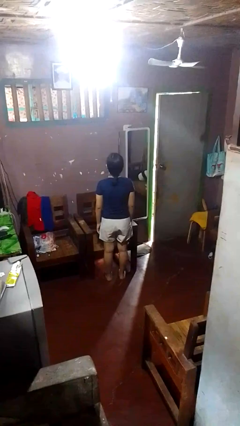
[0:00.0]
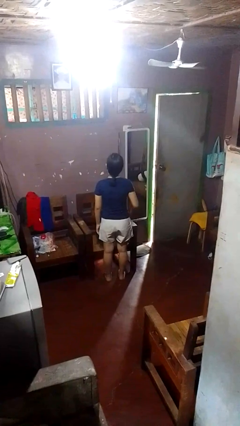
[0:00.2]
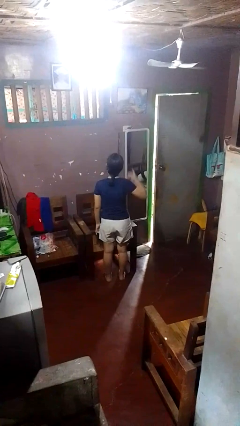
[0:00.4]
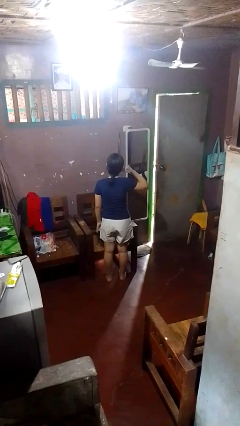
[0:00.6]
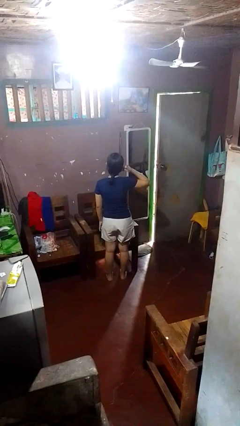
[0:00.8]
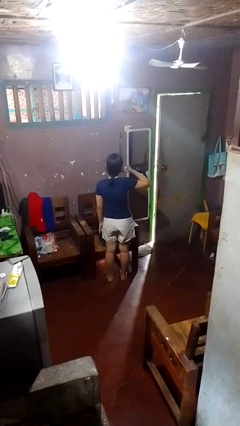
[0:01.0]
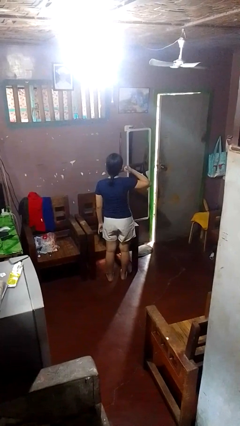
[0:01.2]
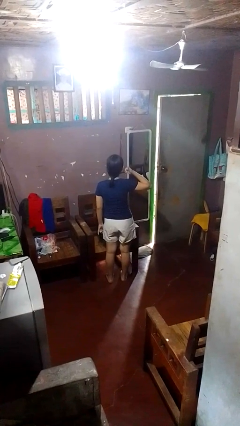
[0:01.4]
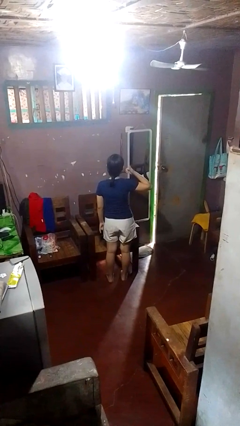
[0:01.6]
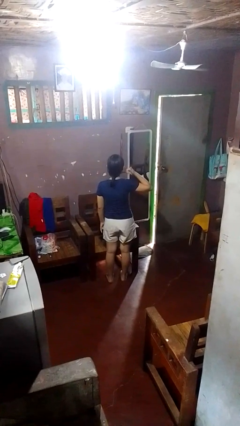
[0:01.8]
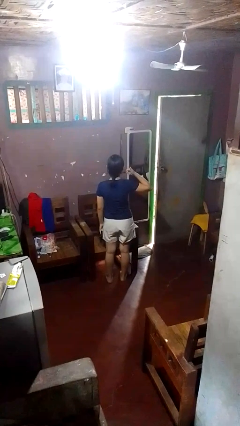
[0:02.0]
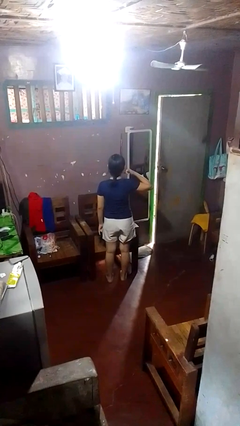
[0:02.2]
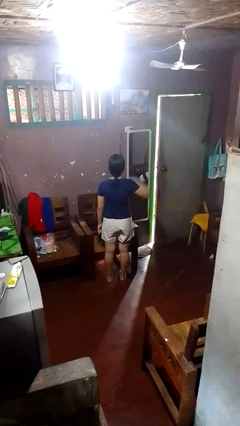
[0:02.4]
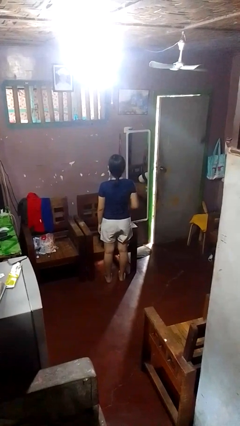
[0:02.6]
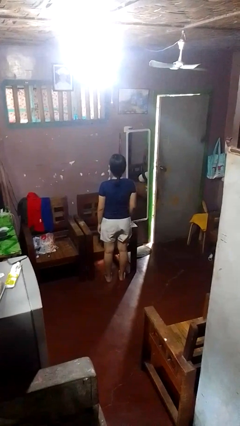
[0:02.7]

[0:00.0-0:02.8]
person gestures call me

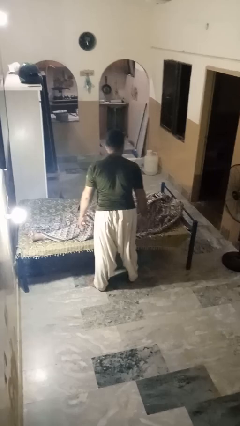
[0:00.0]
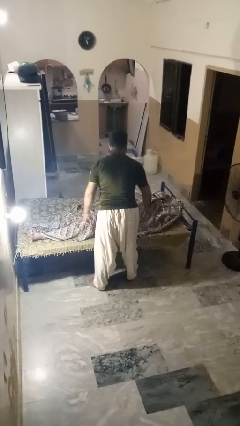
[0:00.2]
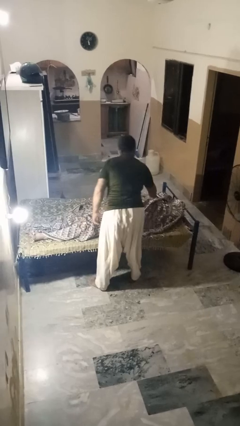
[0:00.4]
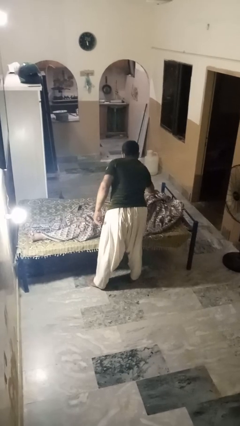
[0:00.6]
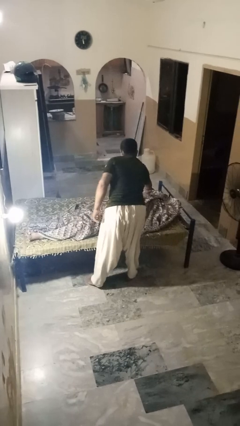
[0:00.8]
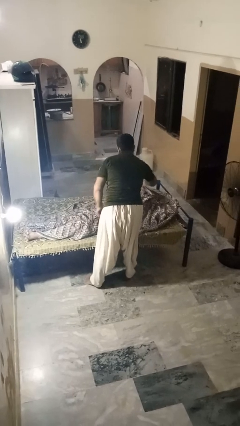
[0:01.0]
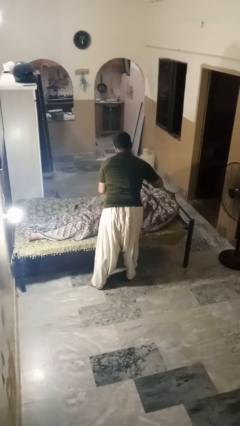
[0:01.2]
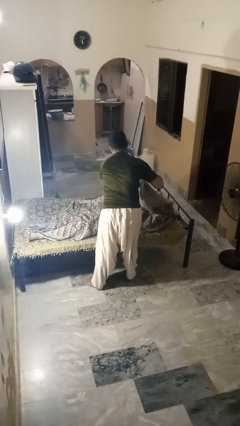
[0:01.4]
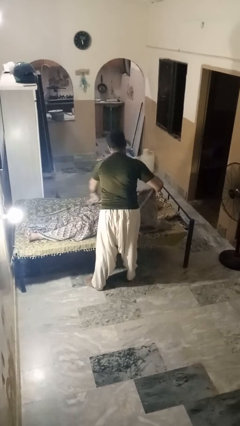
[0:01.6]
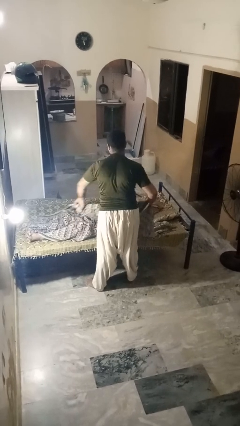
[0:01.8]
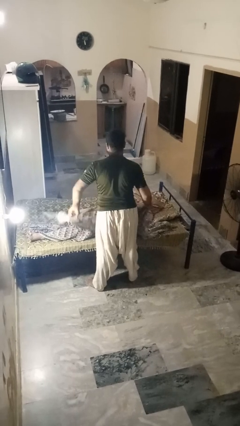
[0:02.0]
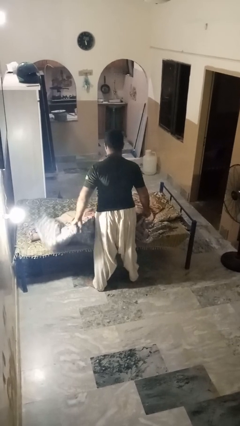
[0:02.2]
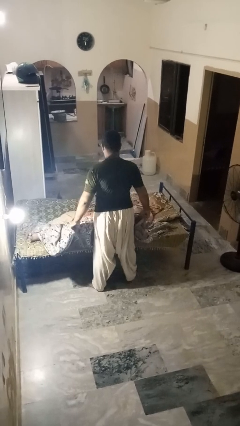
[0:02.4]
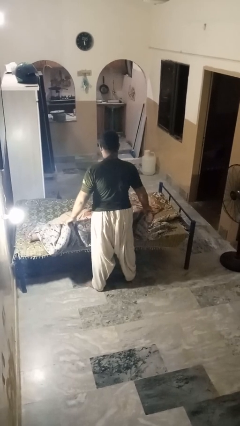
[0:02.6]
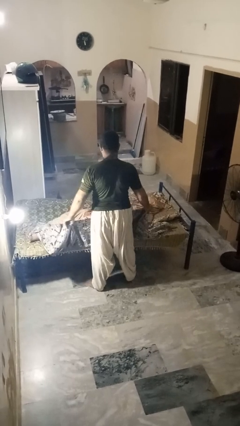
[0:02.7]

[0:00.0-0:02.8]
person uncovers friend with blanket

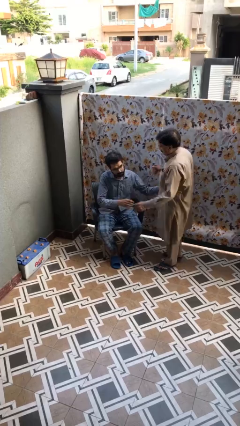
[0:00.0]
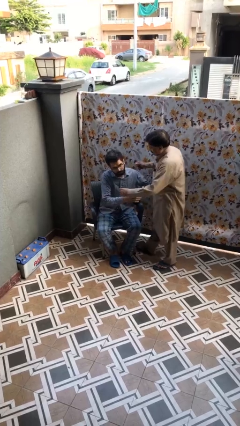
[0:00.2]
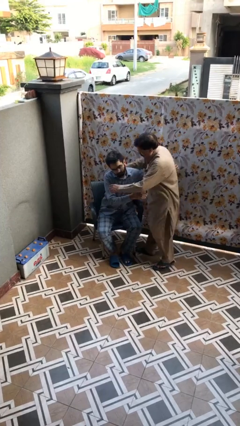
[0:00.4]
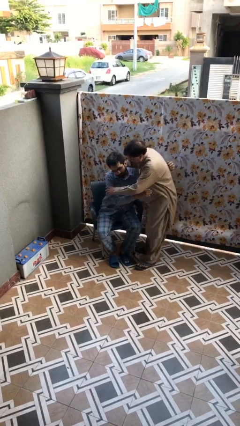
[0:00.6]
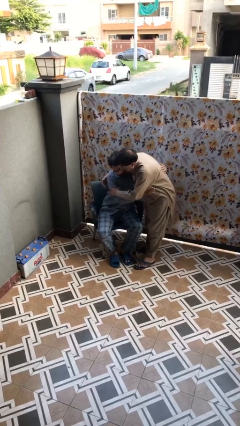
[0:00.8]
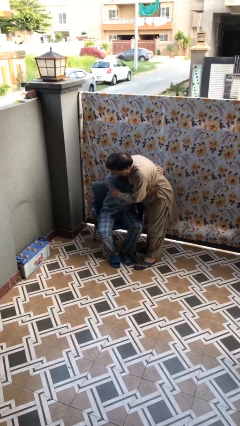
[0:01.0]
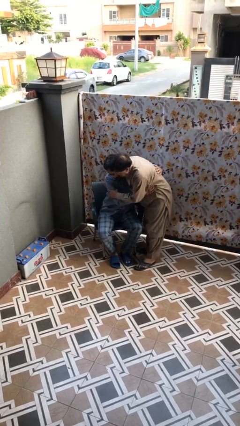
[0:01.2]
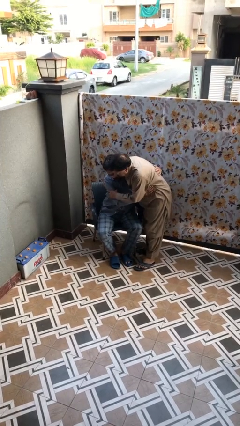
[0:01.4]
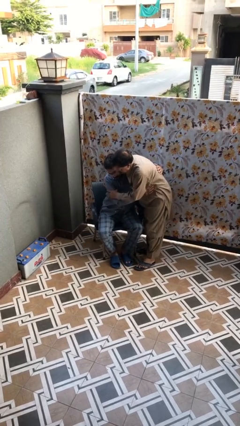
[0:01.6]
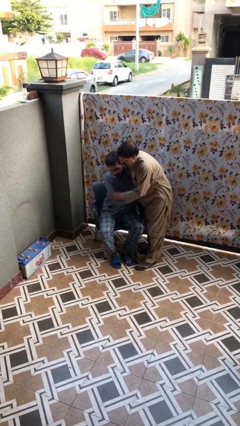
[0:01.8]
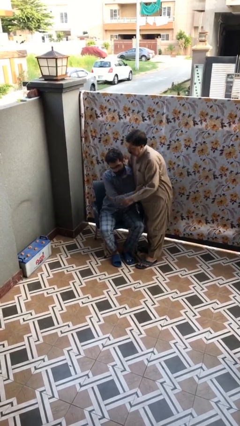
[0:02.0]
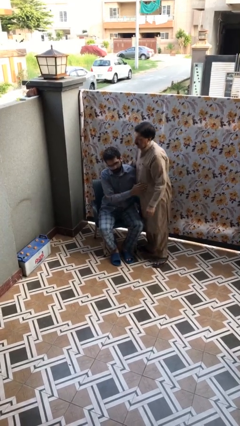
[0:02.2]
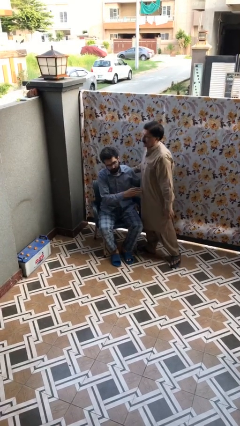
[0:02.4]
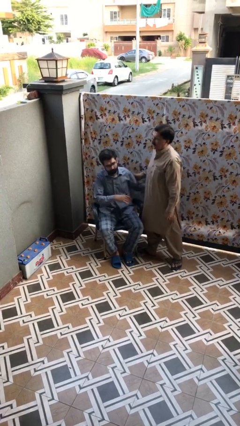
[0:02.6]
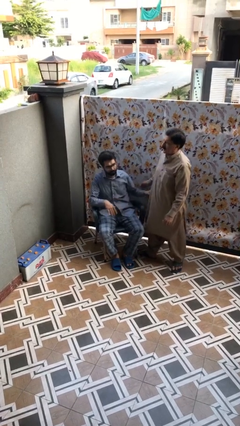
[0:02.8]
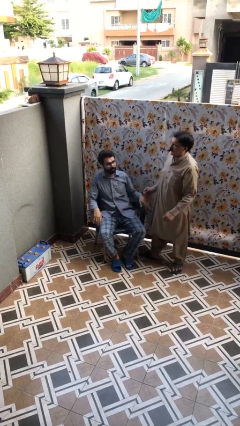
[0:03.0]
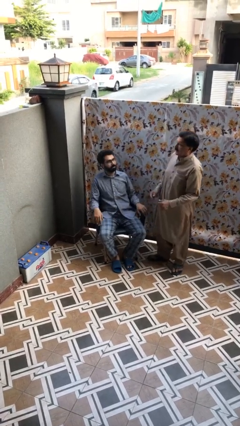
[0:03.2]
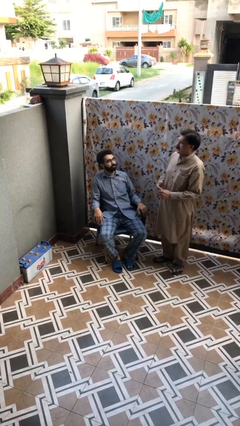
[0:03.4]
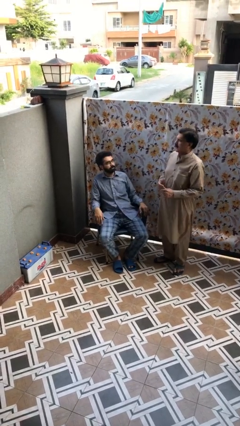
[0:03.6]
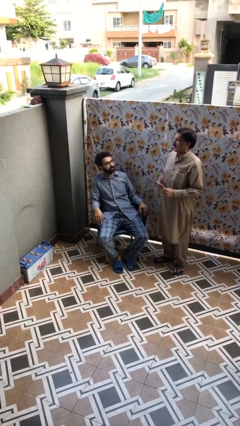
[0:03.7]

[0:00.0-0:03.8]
person embraces person

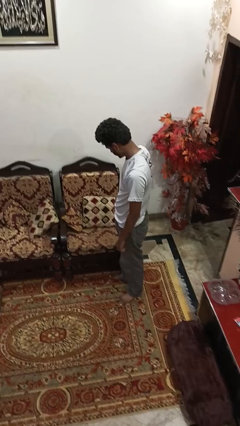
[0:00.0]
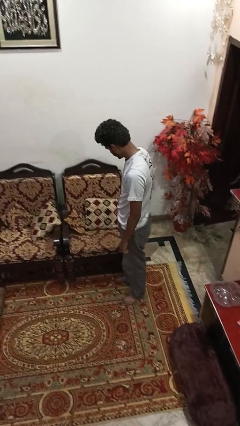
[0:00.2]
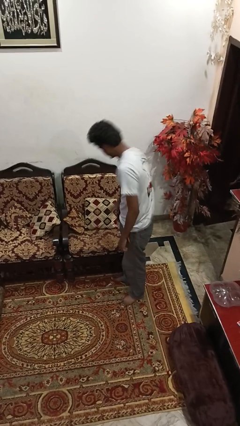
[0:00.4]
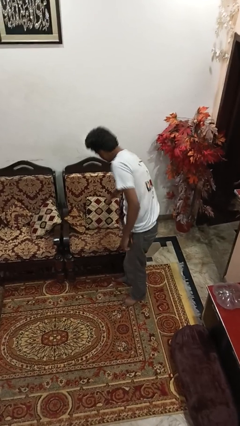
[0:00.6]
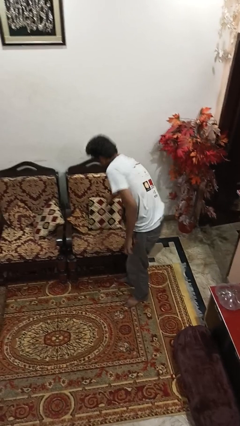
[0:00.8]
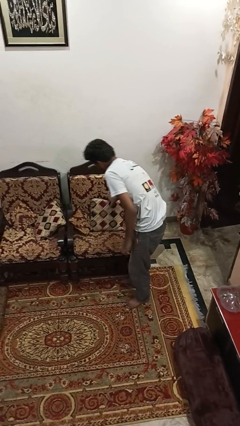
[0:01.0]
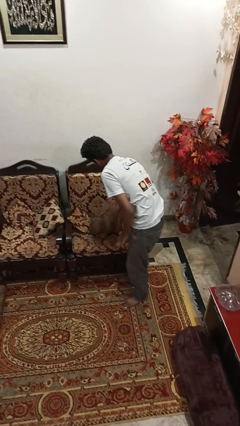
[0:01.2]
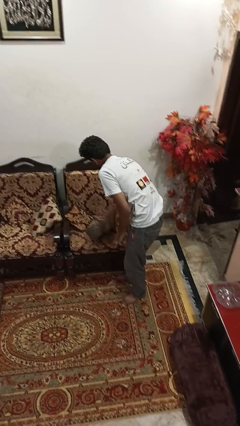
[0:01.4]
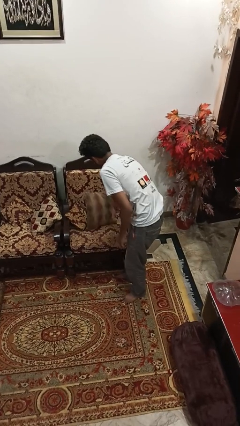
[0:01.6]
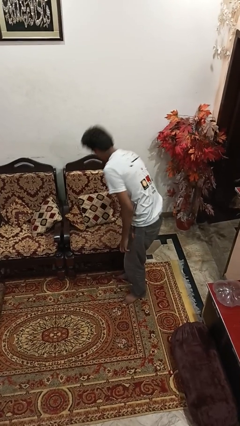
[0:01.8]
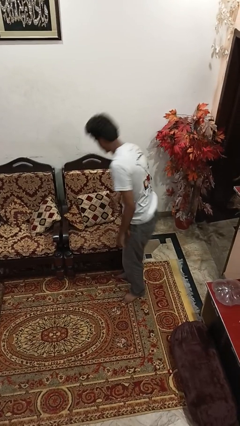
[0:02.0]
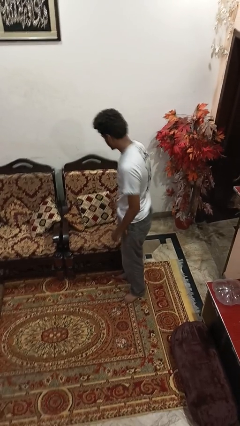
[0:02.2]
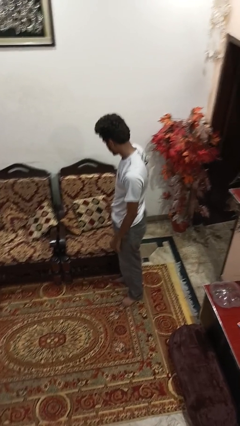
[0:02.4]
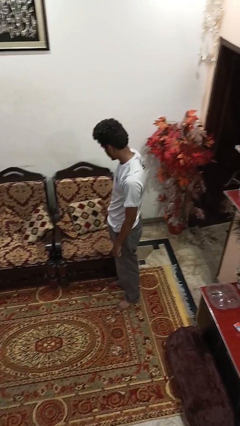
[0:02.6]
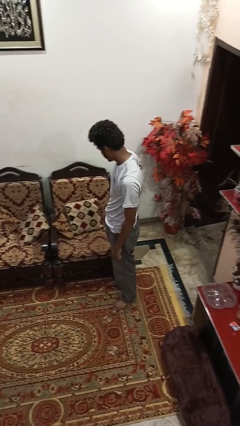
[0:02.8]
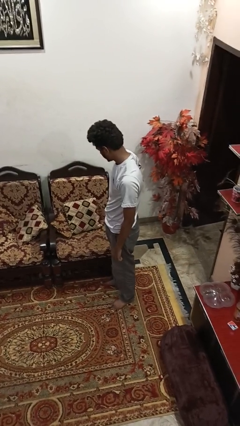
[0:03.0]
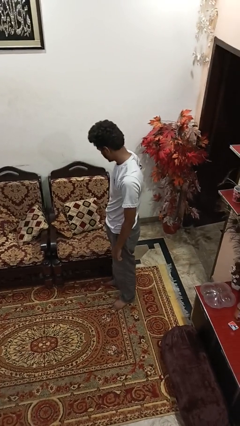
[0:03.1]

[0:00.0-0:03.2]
person searches in couch

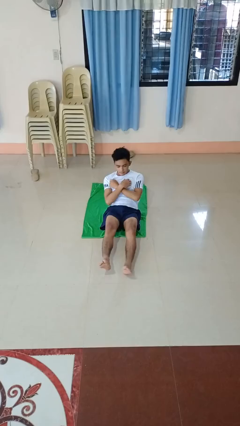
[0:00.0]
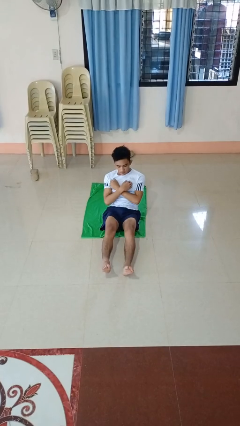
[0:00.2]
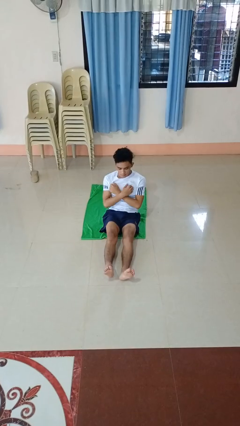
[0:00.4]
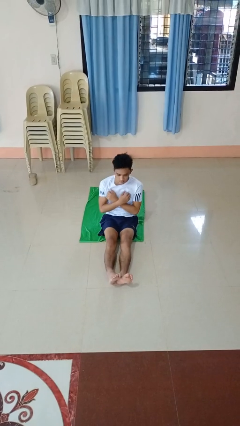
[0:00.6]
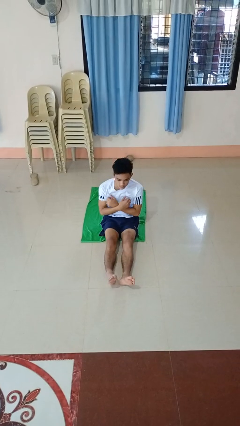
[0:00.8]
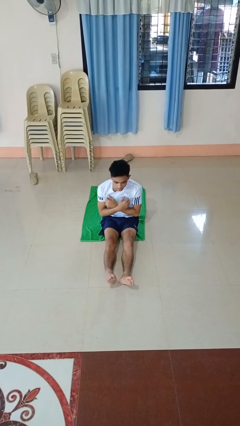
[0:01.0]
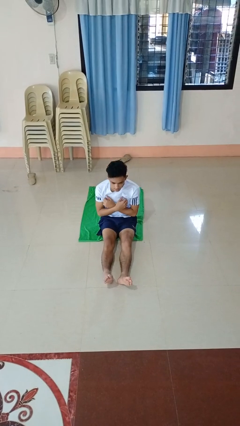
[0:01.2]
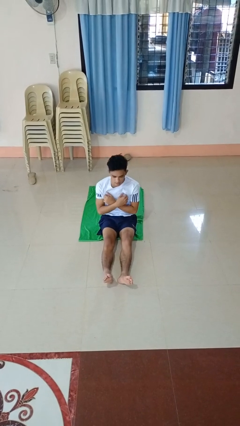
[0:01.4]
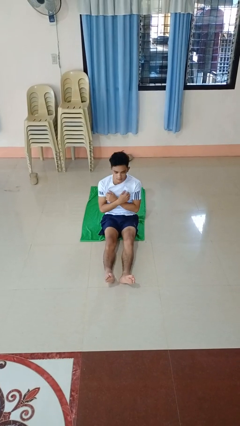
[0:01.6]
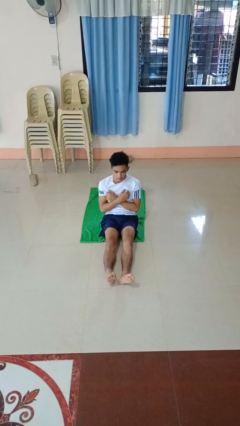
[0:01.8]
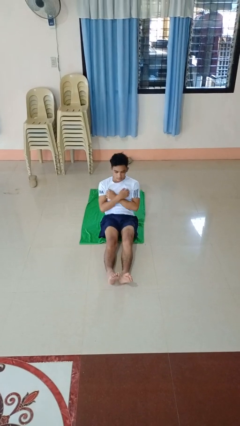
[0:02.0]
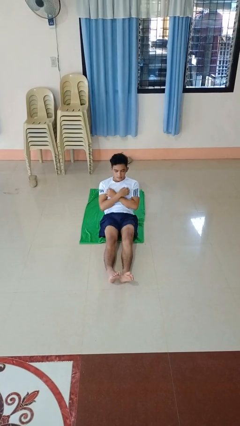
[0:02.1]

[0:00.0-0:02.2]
person exercises with situp

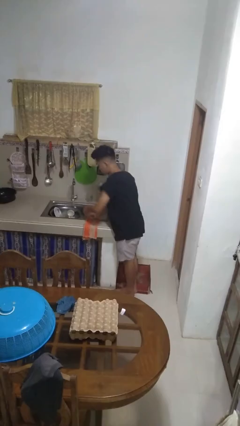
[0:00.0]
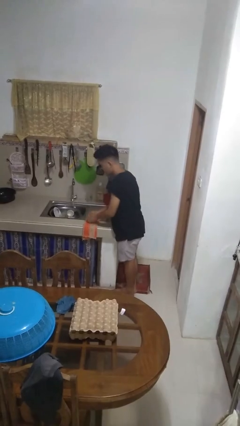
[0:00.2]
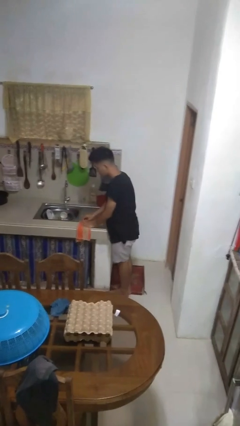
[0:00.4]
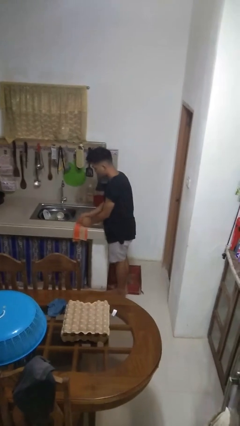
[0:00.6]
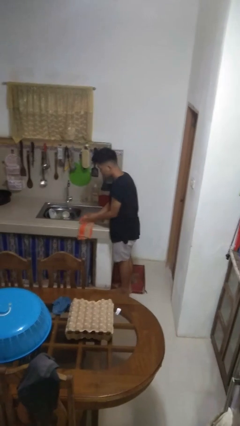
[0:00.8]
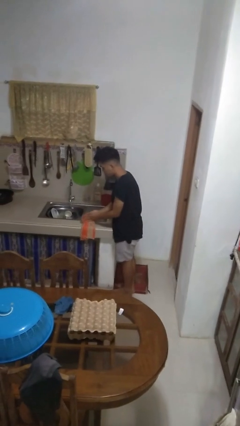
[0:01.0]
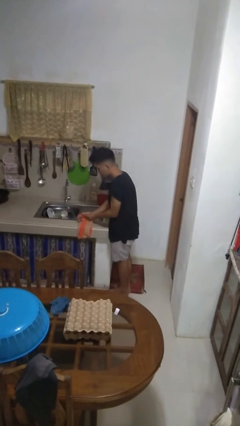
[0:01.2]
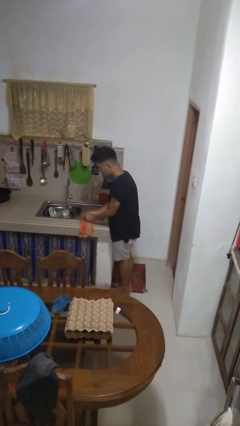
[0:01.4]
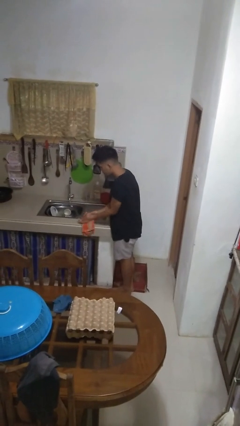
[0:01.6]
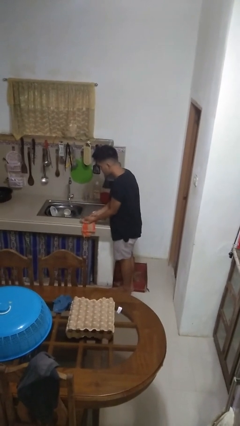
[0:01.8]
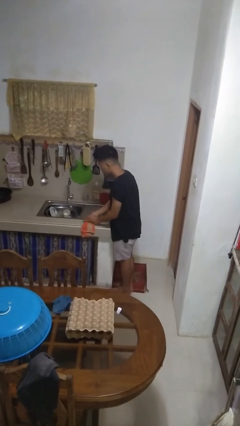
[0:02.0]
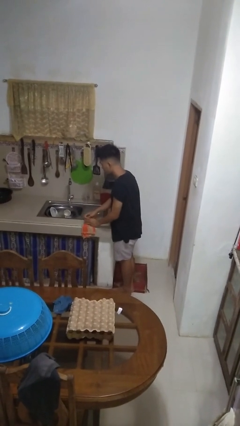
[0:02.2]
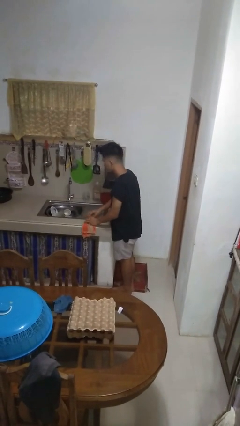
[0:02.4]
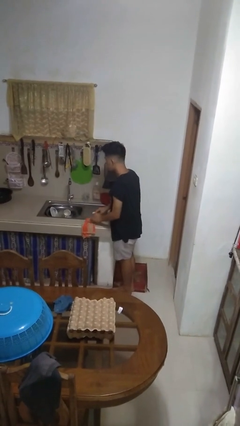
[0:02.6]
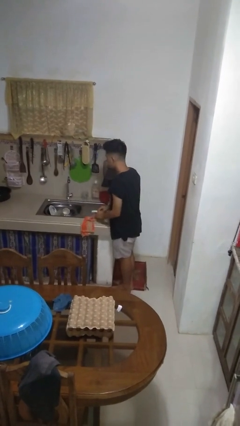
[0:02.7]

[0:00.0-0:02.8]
person dries hands with towel
